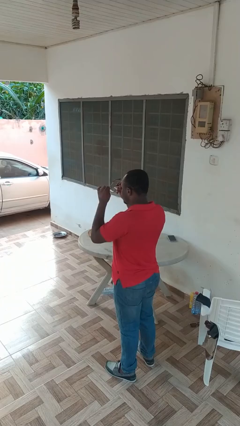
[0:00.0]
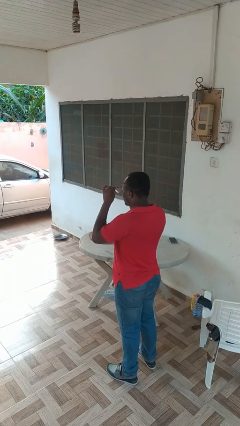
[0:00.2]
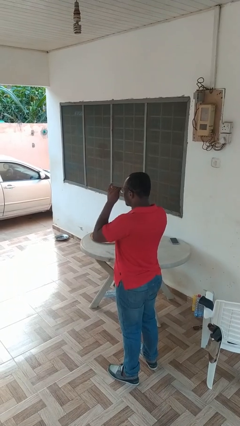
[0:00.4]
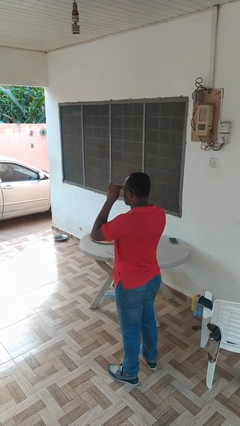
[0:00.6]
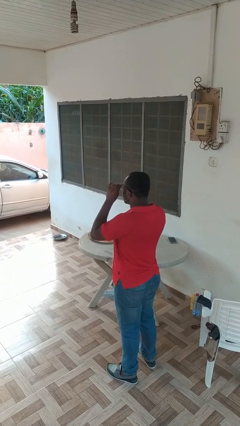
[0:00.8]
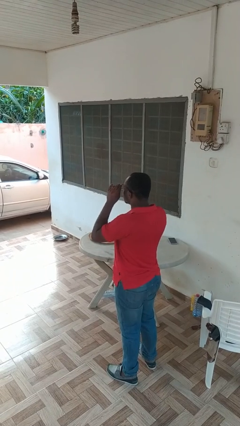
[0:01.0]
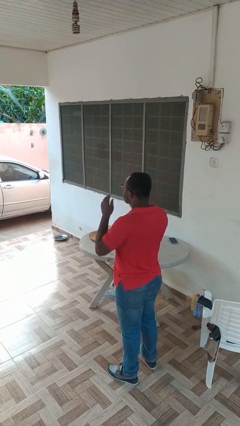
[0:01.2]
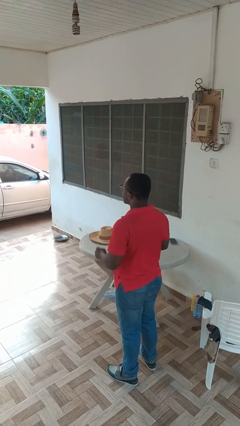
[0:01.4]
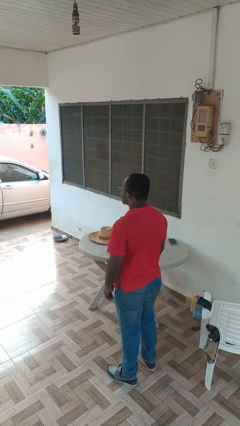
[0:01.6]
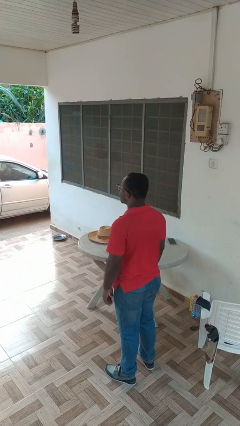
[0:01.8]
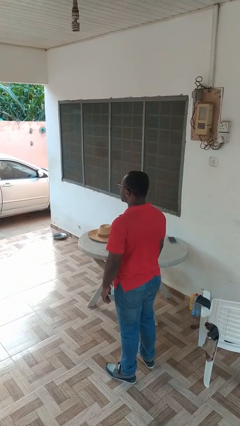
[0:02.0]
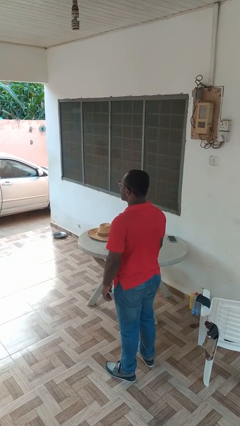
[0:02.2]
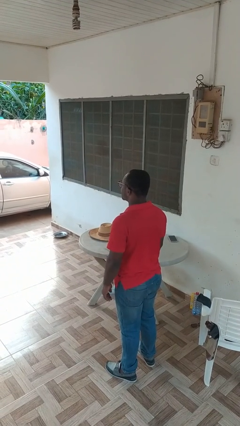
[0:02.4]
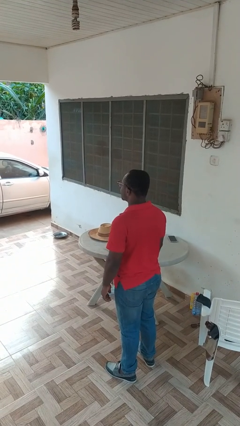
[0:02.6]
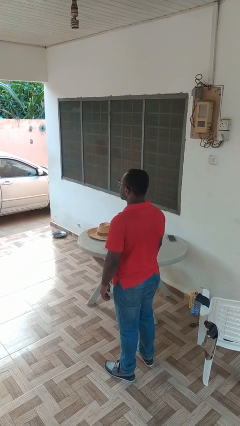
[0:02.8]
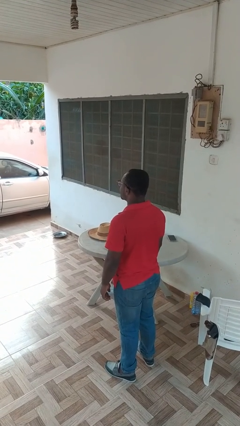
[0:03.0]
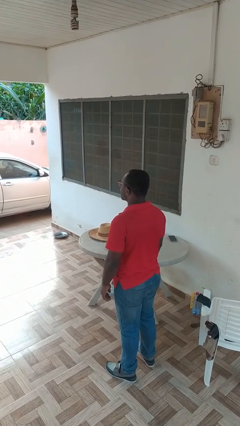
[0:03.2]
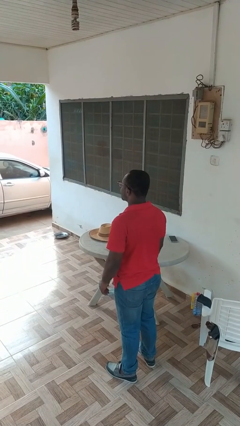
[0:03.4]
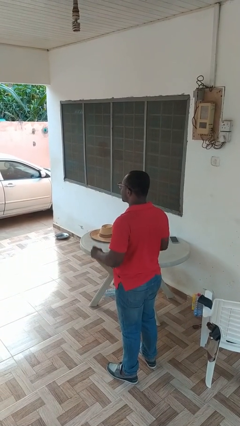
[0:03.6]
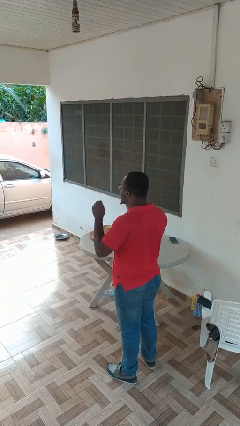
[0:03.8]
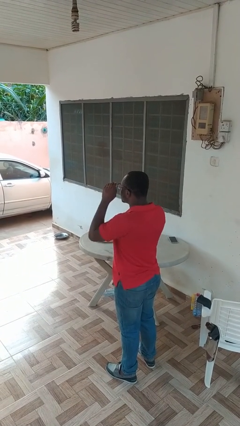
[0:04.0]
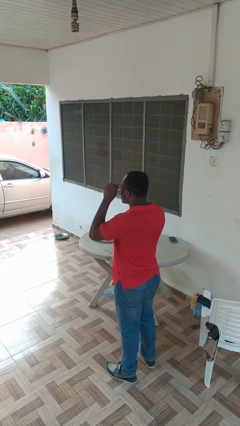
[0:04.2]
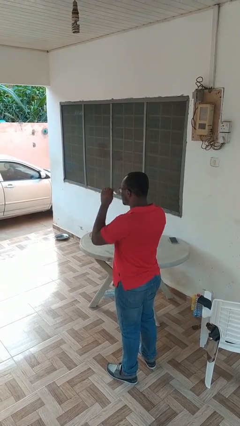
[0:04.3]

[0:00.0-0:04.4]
person puts on glasses

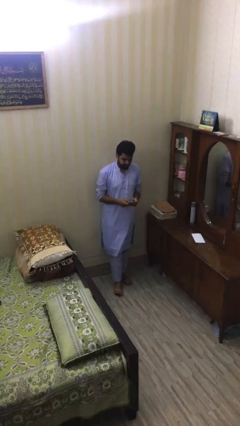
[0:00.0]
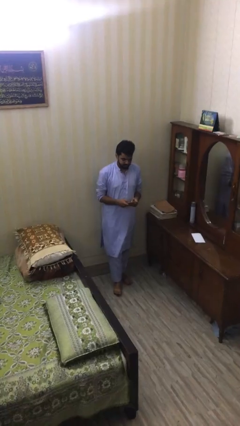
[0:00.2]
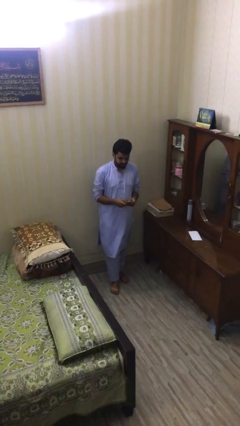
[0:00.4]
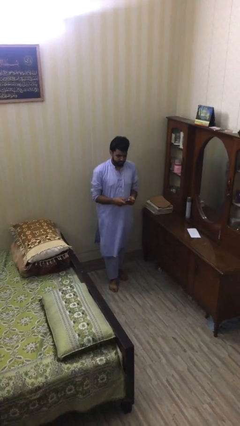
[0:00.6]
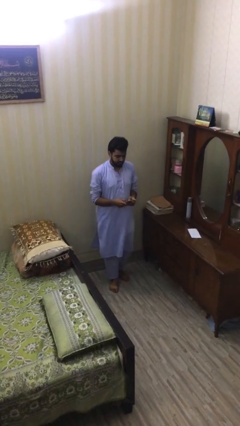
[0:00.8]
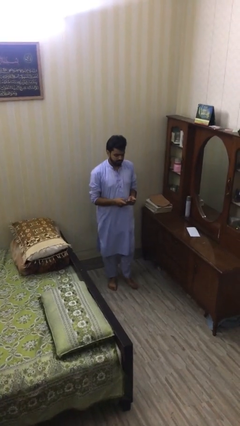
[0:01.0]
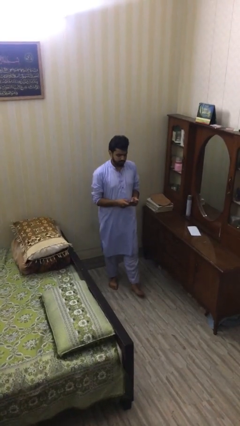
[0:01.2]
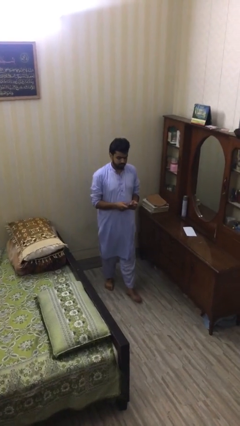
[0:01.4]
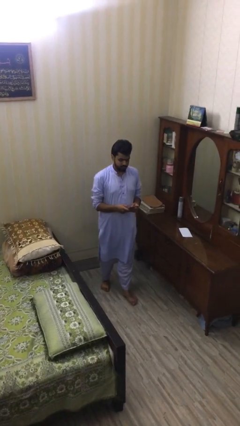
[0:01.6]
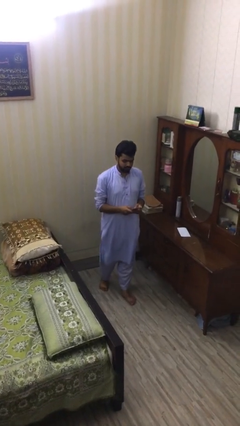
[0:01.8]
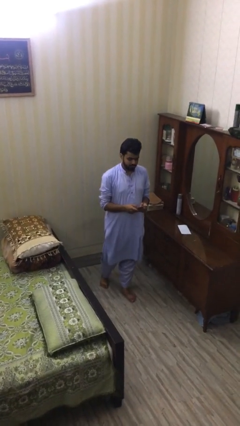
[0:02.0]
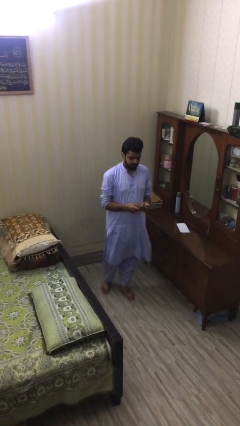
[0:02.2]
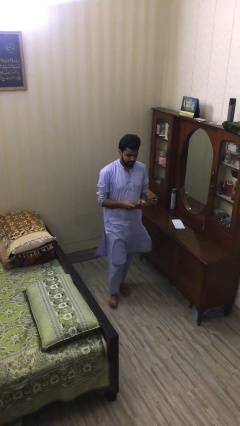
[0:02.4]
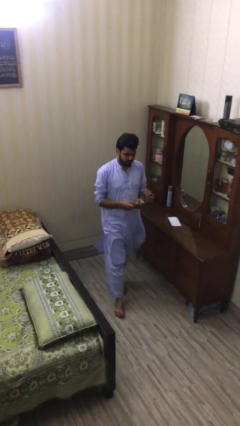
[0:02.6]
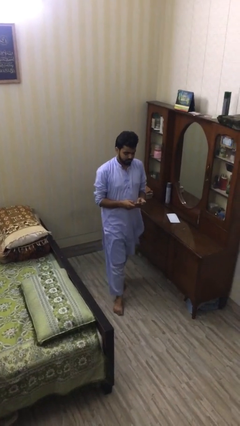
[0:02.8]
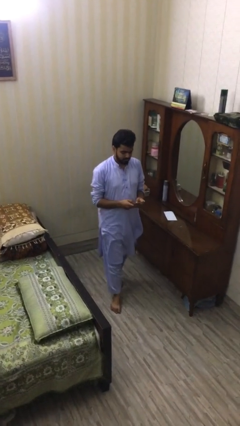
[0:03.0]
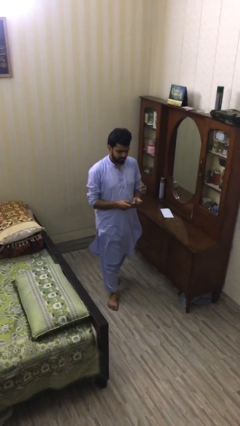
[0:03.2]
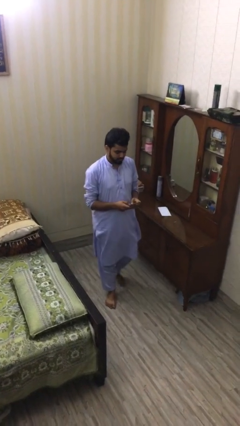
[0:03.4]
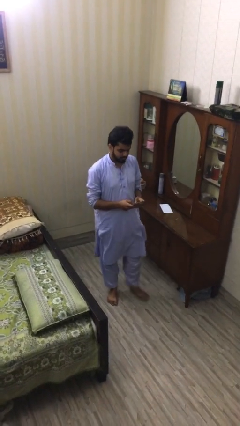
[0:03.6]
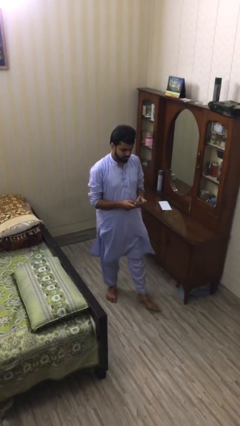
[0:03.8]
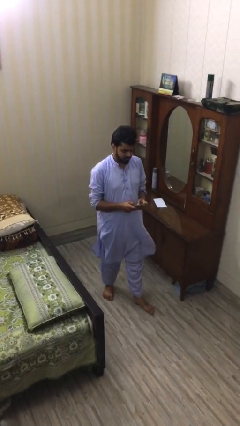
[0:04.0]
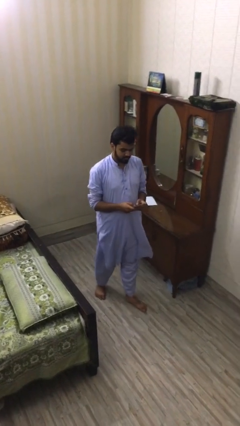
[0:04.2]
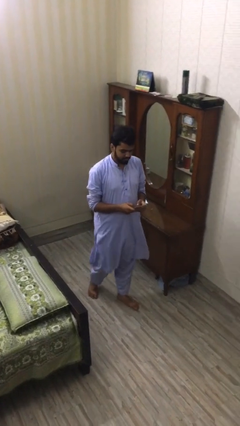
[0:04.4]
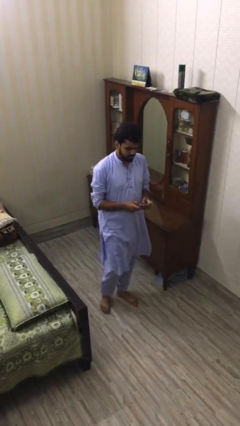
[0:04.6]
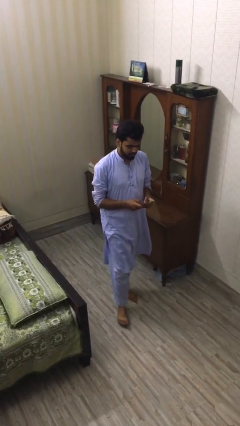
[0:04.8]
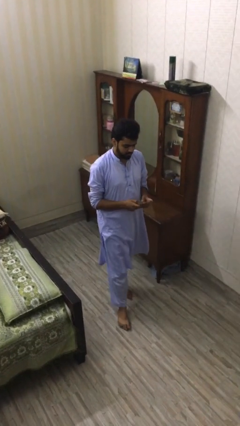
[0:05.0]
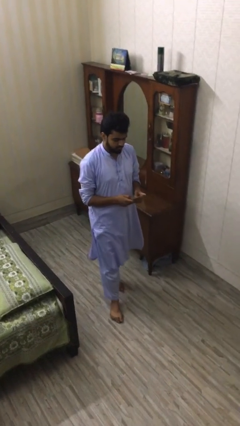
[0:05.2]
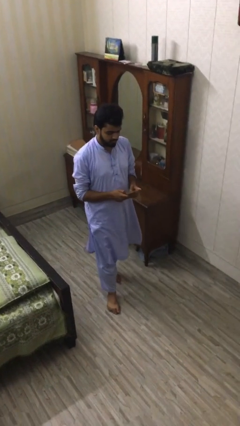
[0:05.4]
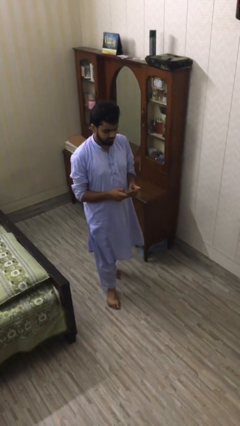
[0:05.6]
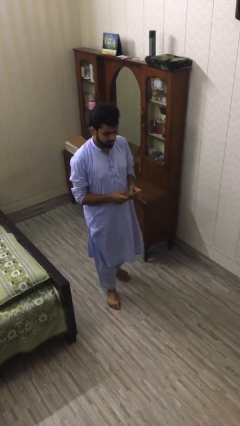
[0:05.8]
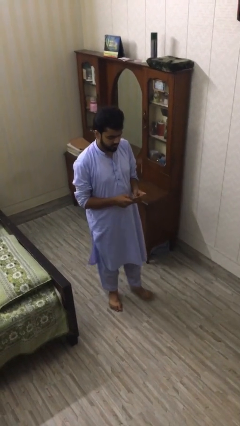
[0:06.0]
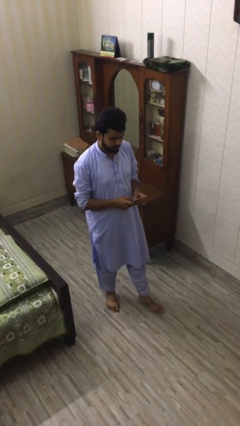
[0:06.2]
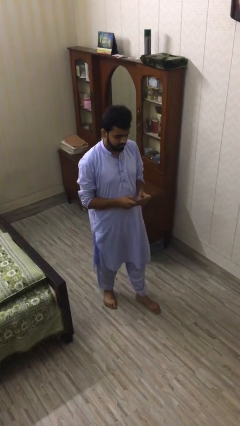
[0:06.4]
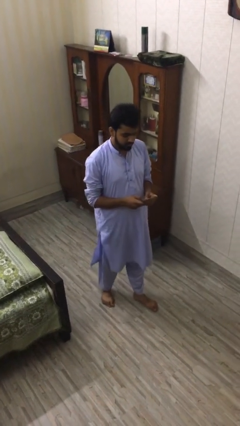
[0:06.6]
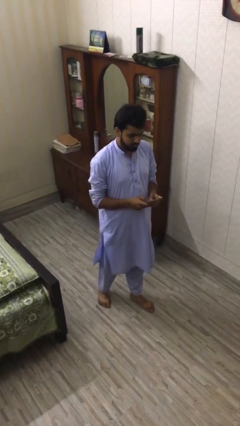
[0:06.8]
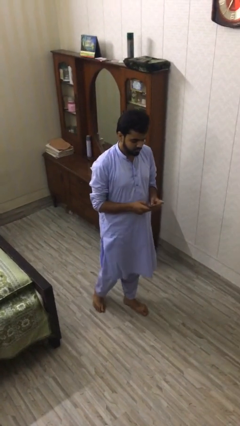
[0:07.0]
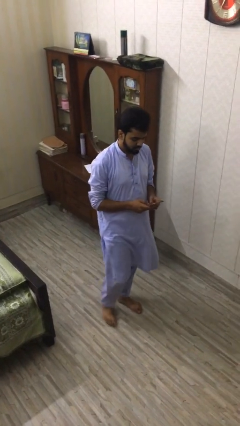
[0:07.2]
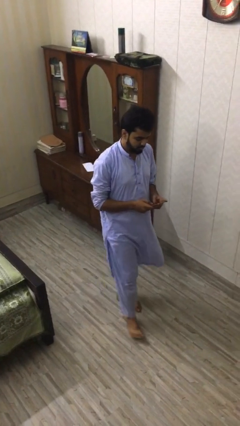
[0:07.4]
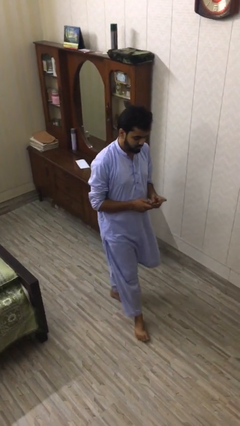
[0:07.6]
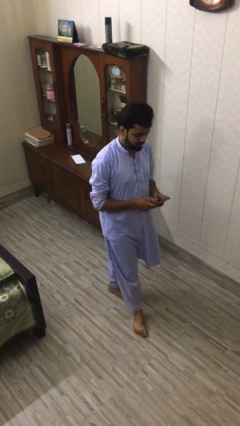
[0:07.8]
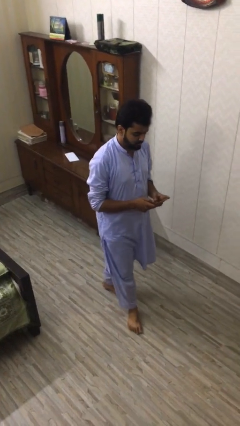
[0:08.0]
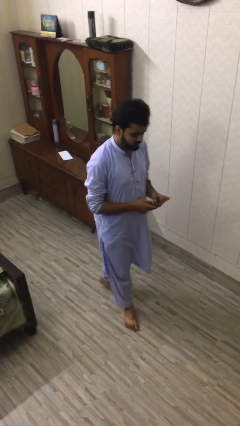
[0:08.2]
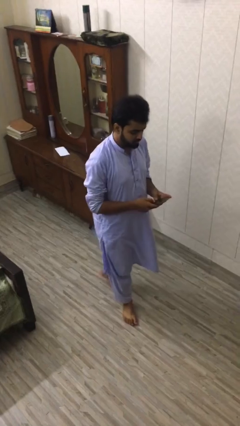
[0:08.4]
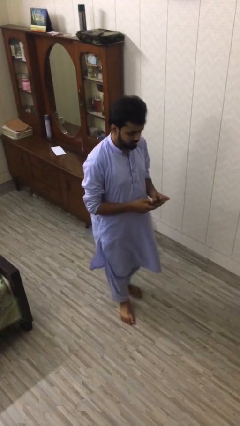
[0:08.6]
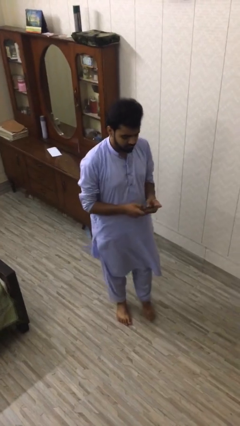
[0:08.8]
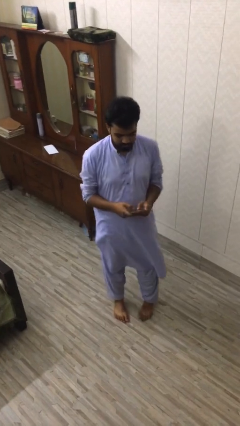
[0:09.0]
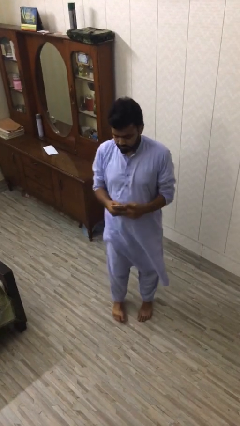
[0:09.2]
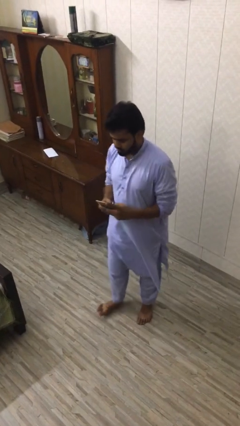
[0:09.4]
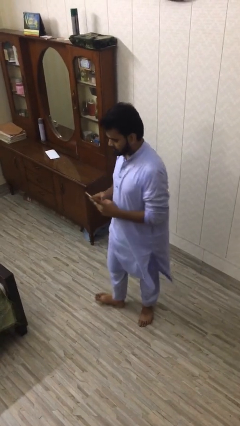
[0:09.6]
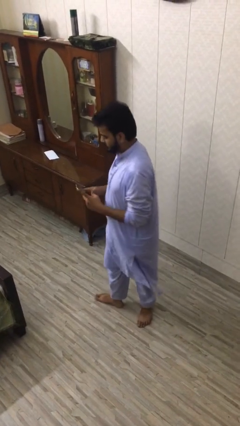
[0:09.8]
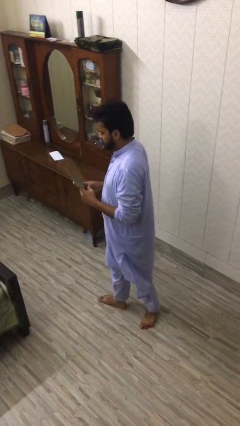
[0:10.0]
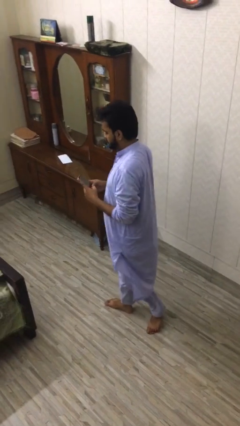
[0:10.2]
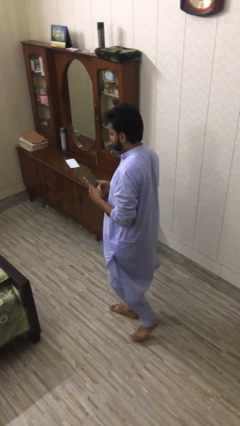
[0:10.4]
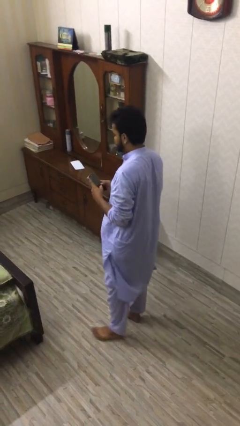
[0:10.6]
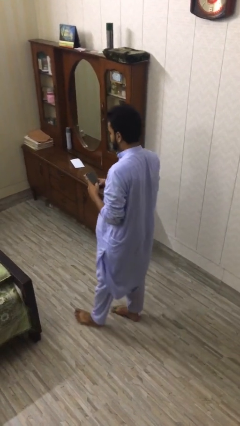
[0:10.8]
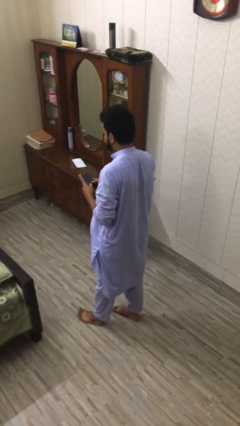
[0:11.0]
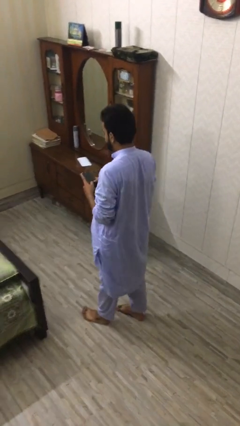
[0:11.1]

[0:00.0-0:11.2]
person texts on phone

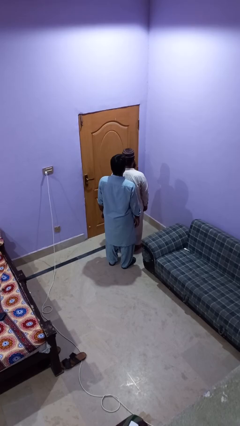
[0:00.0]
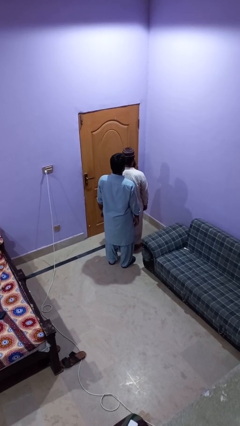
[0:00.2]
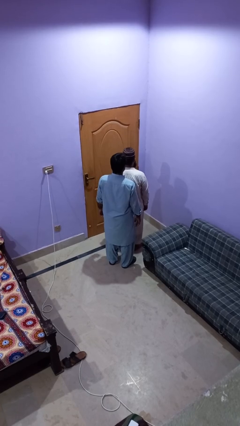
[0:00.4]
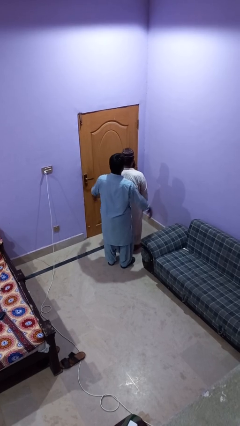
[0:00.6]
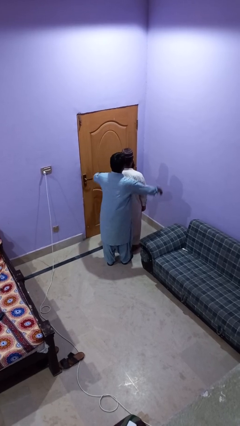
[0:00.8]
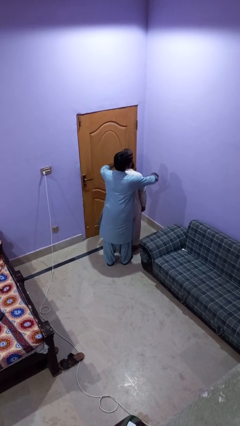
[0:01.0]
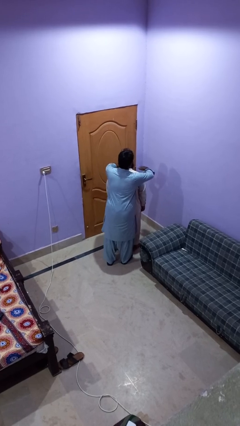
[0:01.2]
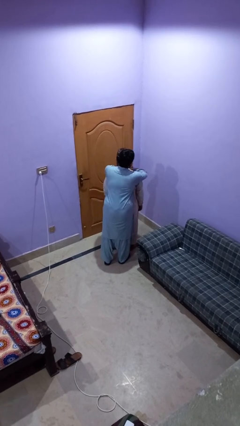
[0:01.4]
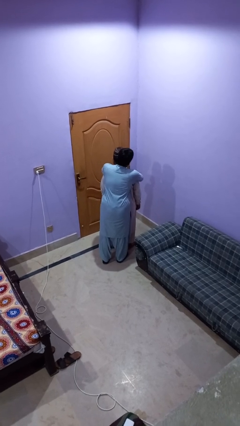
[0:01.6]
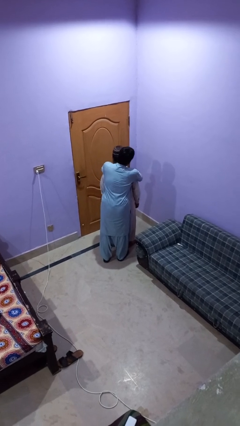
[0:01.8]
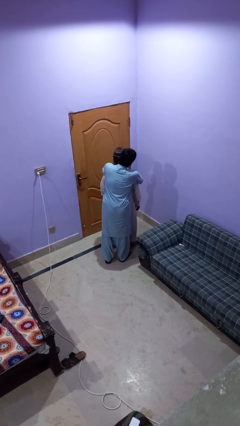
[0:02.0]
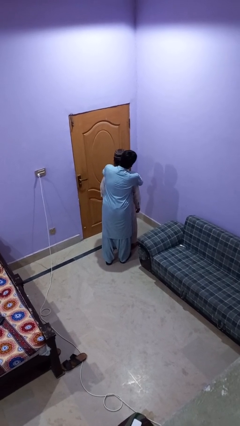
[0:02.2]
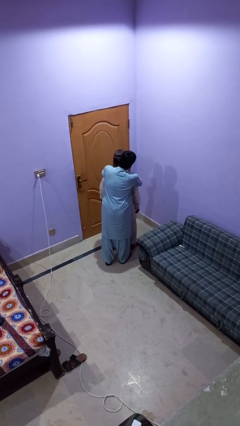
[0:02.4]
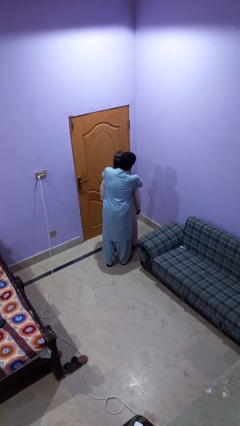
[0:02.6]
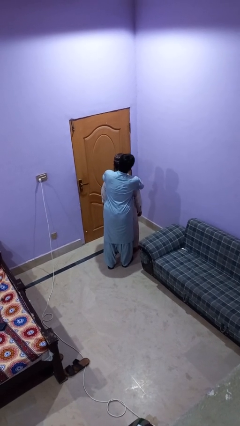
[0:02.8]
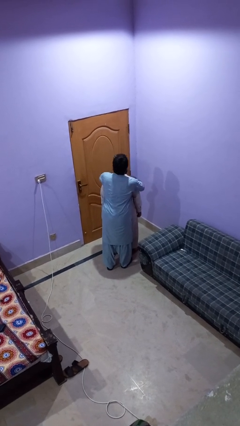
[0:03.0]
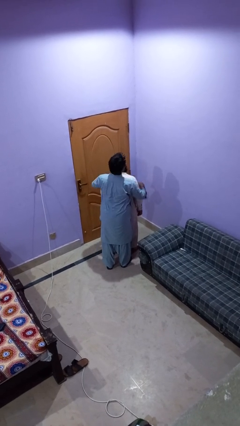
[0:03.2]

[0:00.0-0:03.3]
person hugs person from behind
